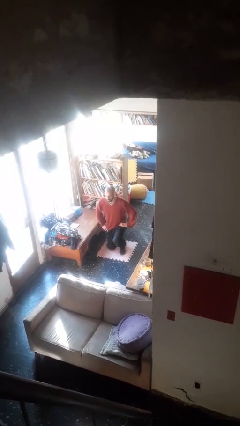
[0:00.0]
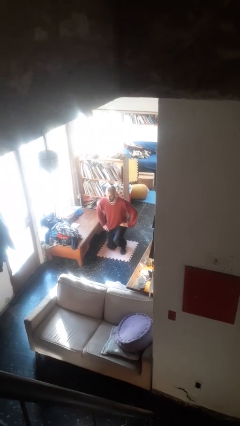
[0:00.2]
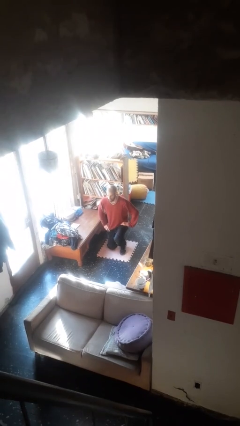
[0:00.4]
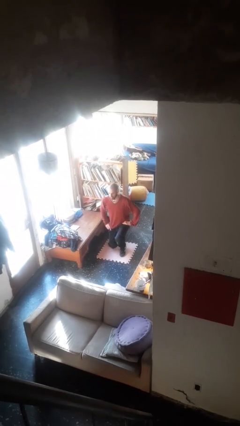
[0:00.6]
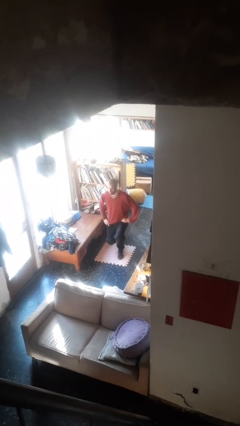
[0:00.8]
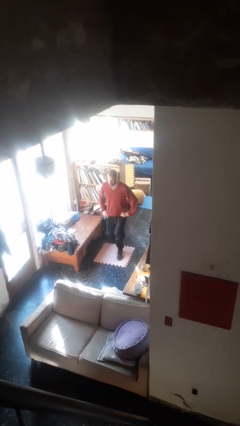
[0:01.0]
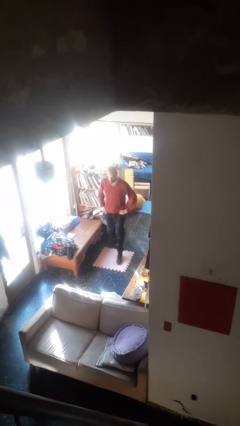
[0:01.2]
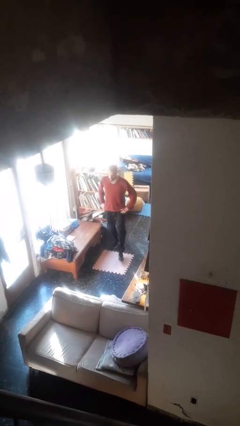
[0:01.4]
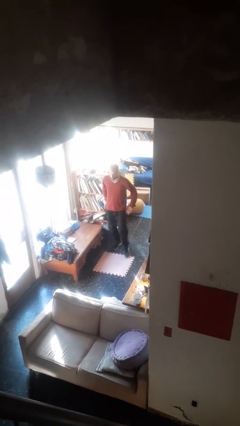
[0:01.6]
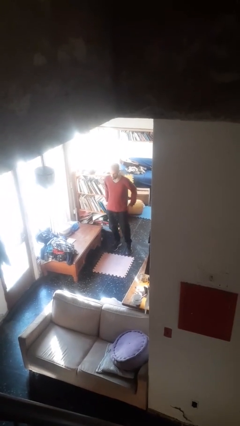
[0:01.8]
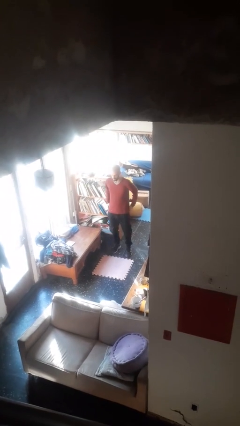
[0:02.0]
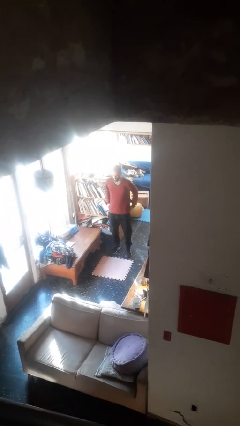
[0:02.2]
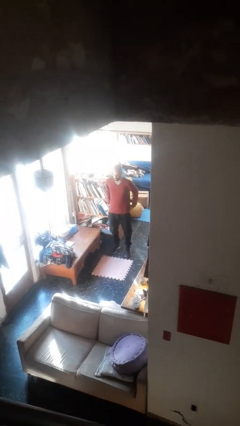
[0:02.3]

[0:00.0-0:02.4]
person stands up from floor

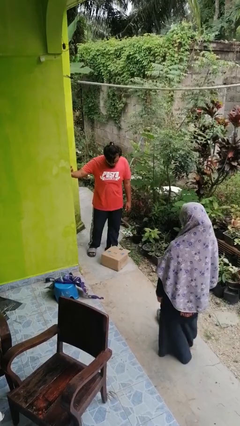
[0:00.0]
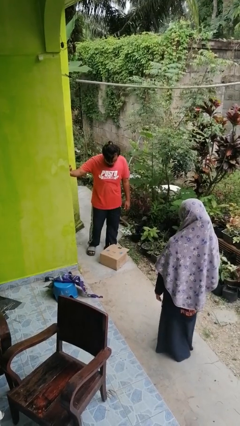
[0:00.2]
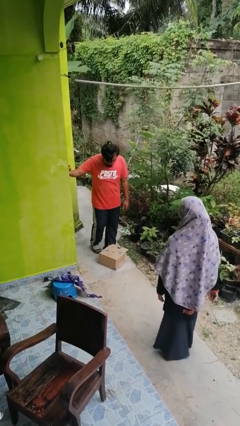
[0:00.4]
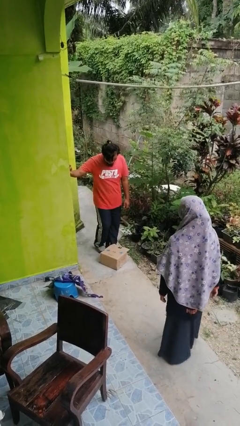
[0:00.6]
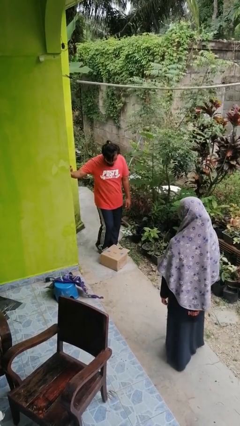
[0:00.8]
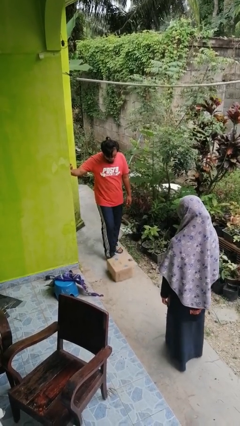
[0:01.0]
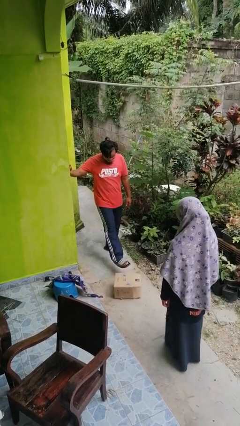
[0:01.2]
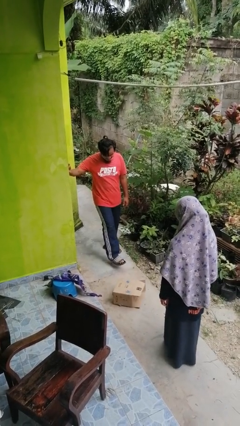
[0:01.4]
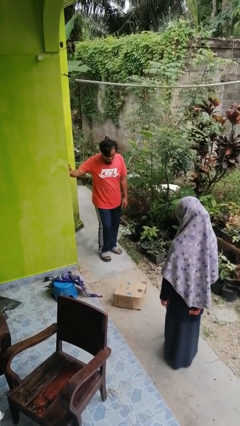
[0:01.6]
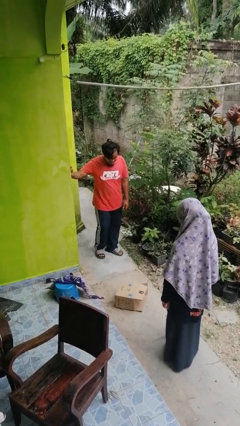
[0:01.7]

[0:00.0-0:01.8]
person kicks object to person

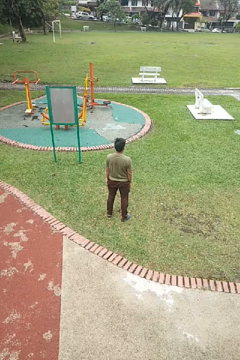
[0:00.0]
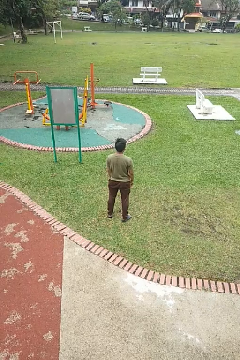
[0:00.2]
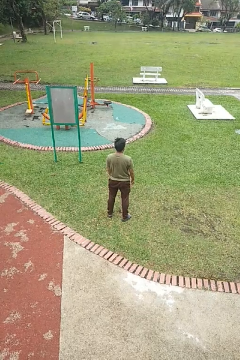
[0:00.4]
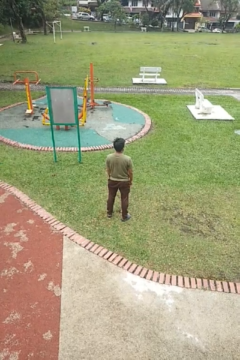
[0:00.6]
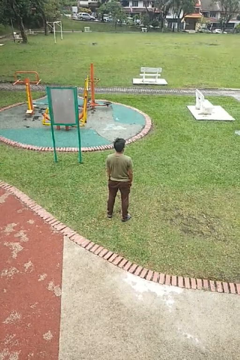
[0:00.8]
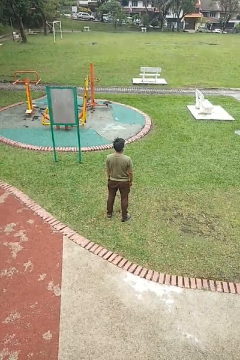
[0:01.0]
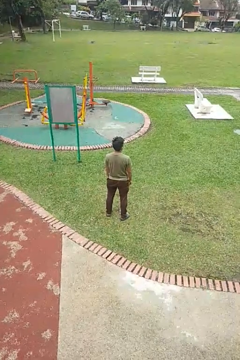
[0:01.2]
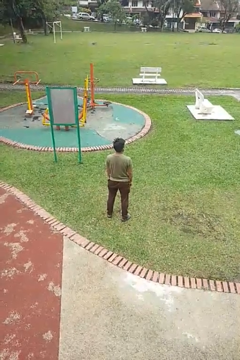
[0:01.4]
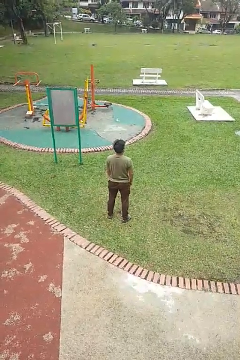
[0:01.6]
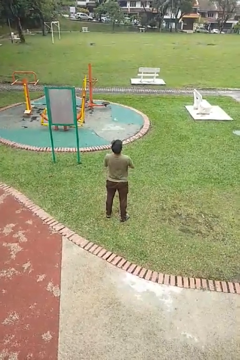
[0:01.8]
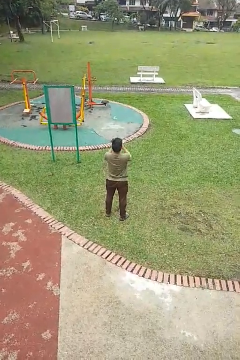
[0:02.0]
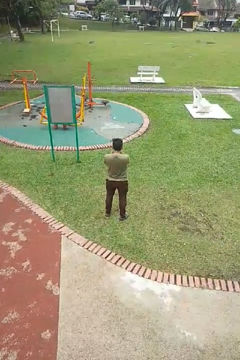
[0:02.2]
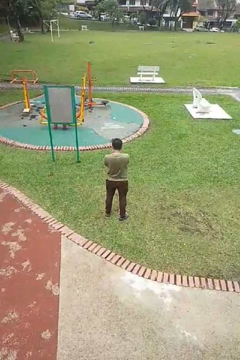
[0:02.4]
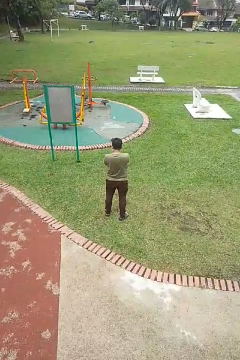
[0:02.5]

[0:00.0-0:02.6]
person sneezes into hand

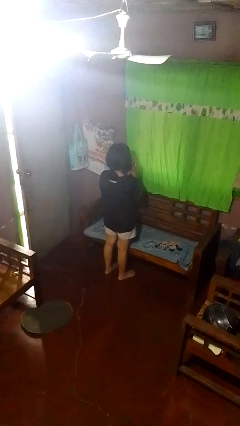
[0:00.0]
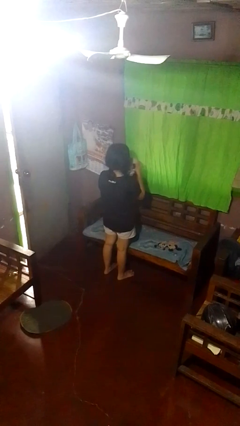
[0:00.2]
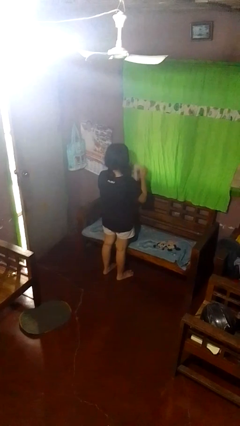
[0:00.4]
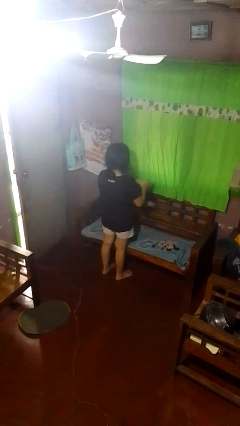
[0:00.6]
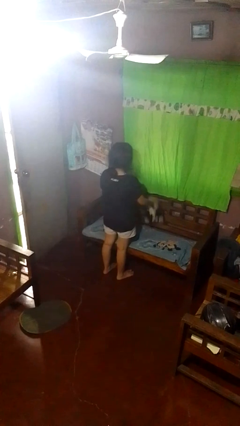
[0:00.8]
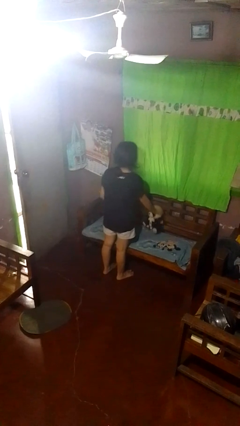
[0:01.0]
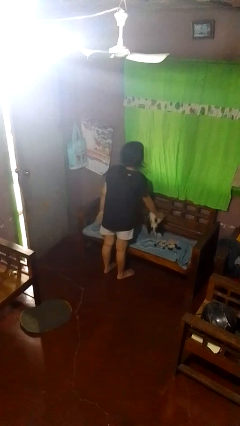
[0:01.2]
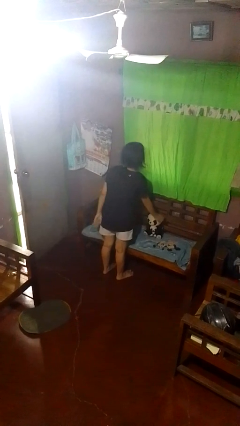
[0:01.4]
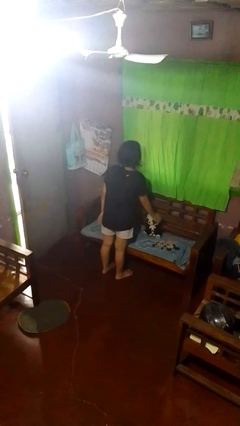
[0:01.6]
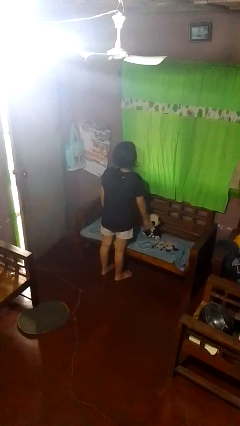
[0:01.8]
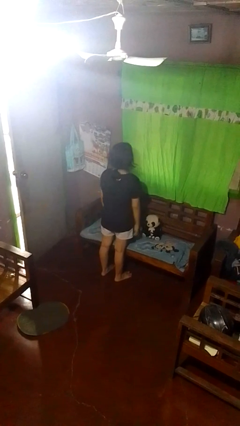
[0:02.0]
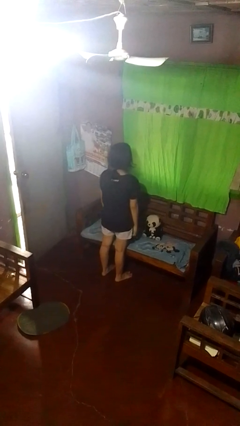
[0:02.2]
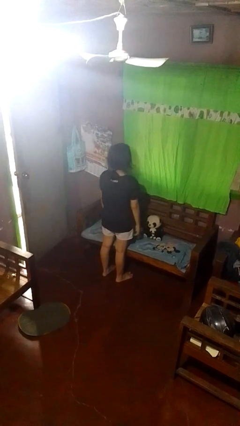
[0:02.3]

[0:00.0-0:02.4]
person puts down object on couch

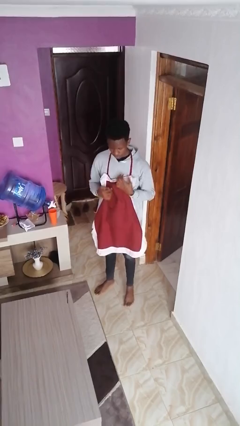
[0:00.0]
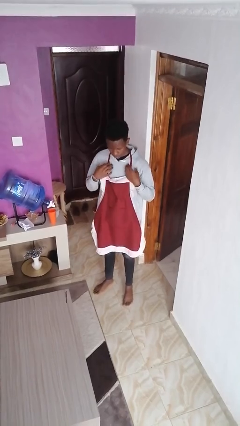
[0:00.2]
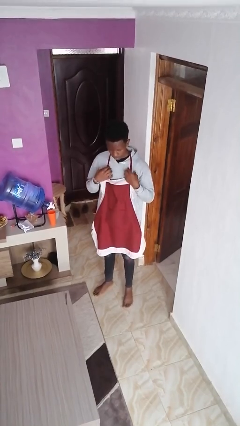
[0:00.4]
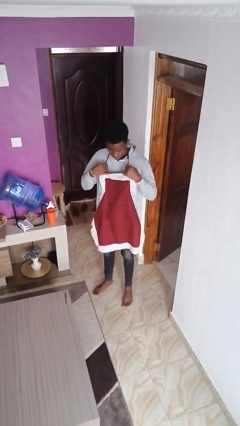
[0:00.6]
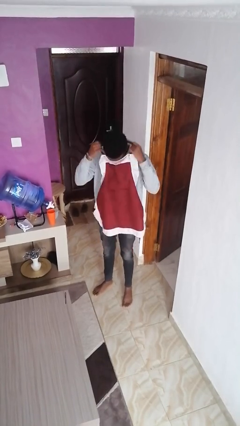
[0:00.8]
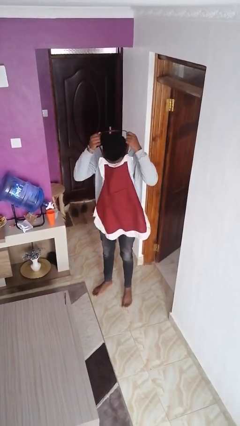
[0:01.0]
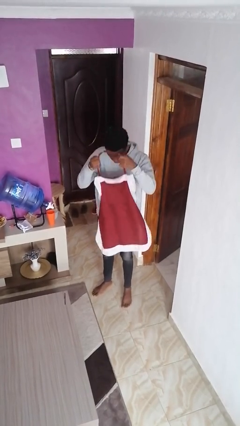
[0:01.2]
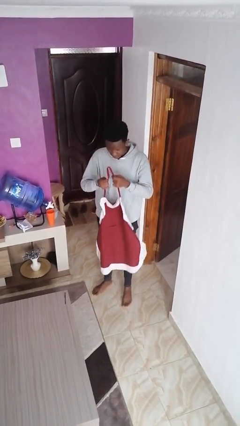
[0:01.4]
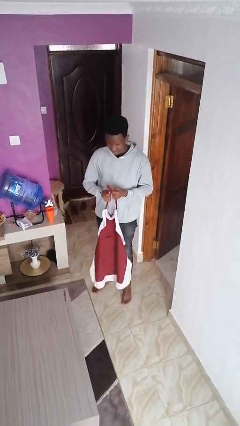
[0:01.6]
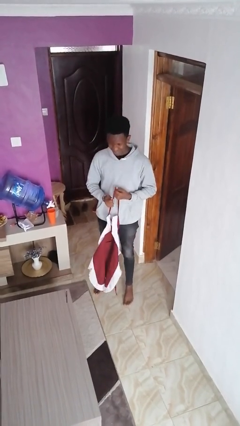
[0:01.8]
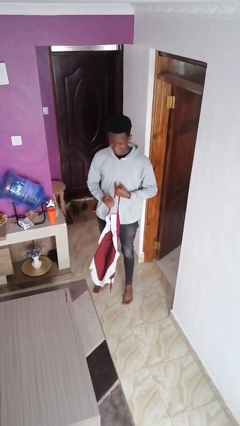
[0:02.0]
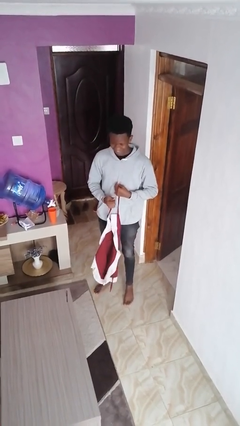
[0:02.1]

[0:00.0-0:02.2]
person takes off apron

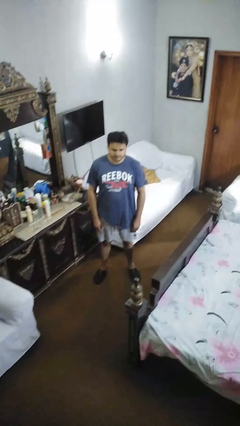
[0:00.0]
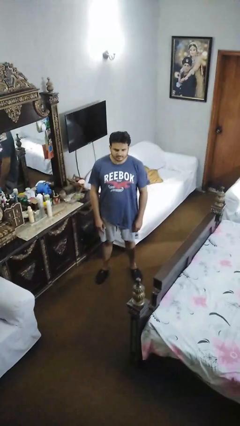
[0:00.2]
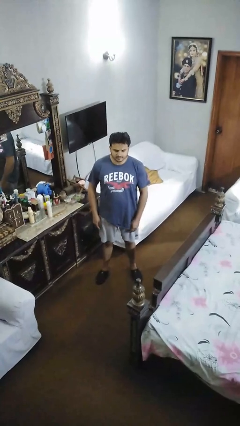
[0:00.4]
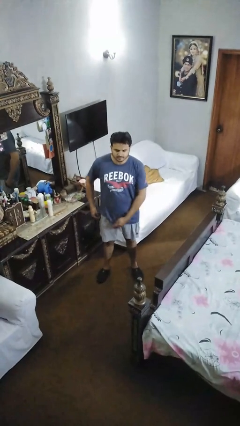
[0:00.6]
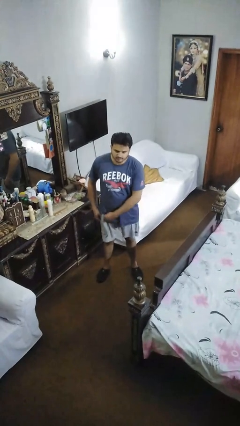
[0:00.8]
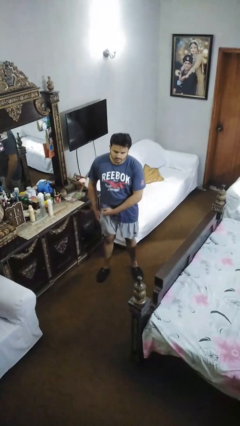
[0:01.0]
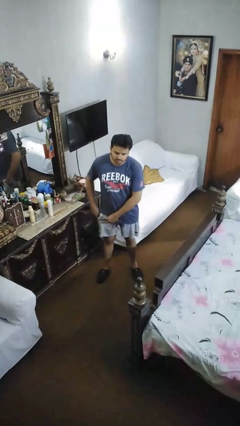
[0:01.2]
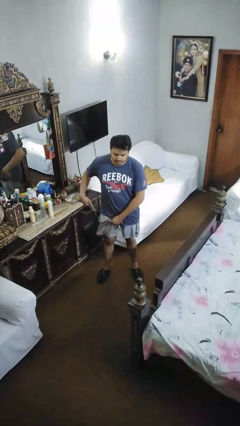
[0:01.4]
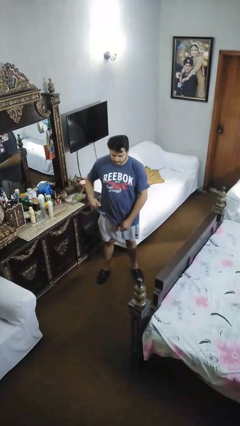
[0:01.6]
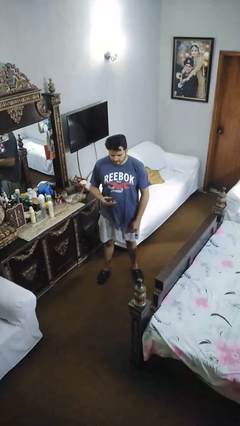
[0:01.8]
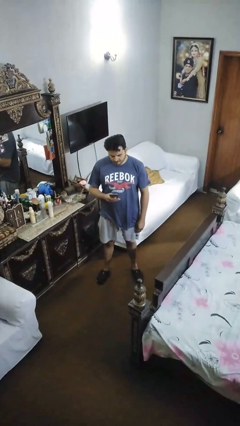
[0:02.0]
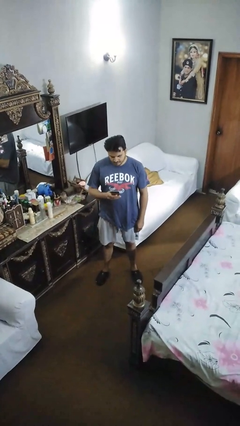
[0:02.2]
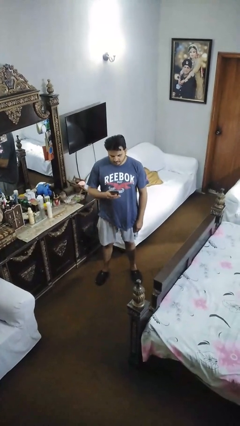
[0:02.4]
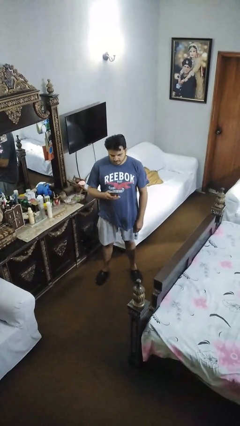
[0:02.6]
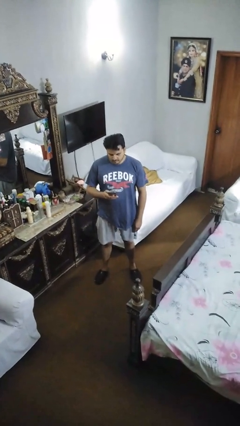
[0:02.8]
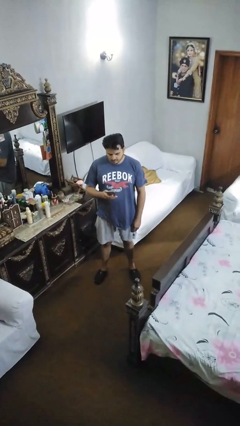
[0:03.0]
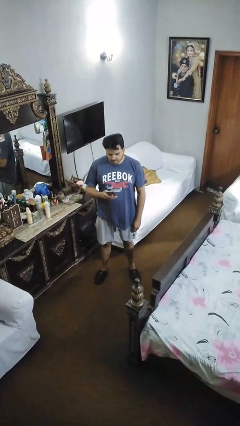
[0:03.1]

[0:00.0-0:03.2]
person takes phone from pocket

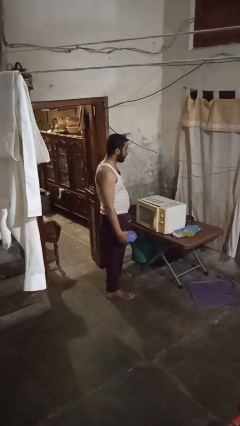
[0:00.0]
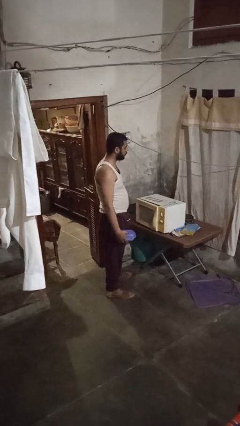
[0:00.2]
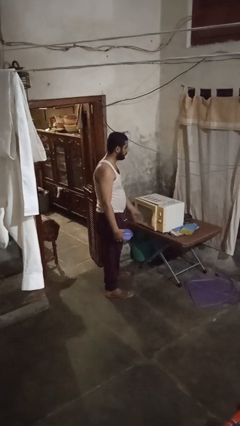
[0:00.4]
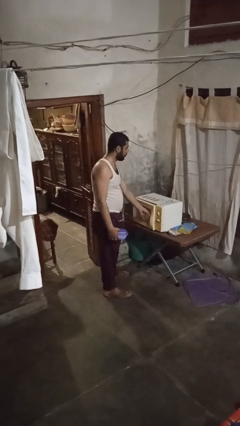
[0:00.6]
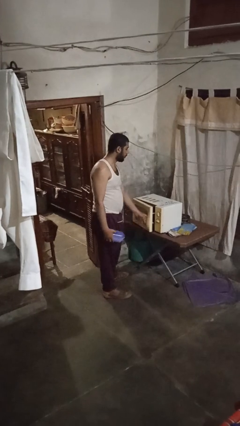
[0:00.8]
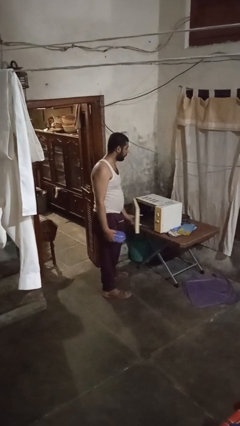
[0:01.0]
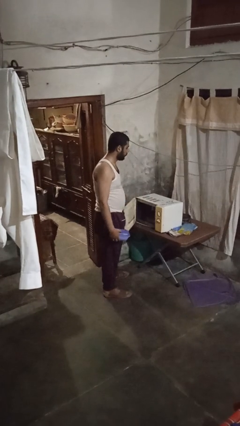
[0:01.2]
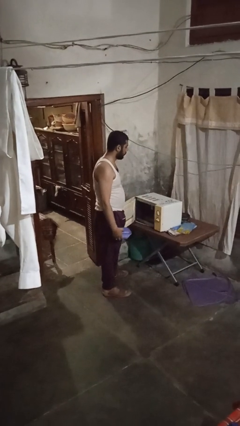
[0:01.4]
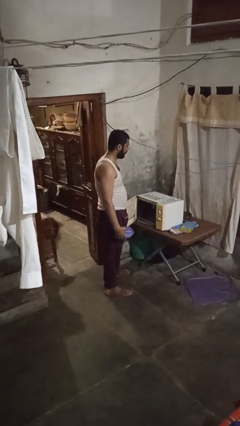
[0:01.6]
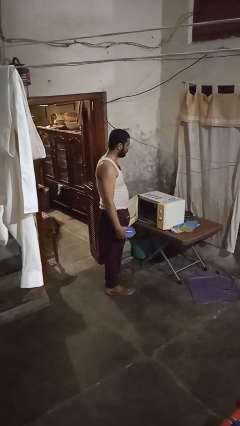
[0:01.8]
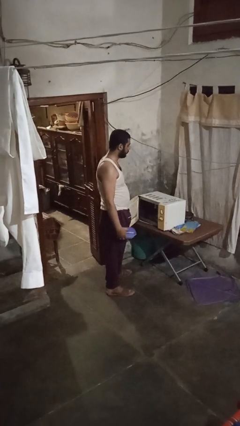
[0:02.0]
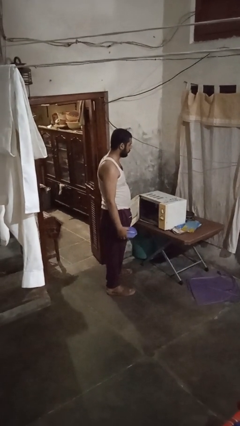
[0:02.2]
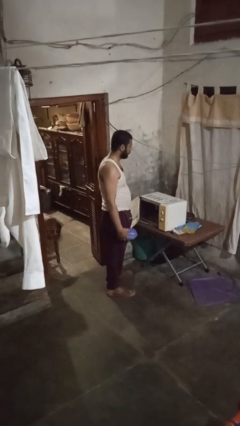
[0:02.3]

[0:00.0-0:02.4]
person opens microwave

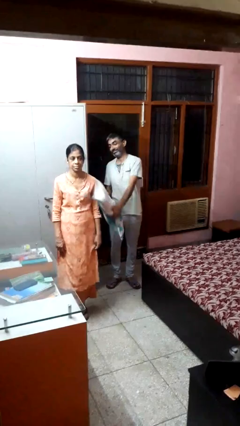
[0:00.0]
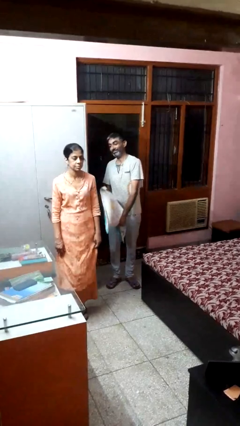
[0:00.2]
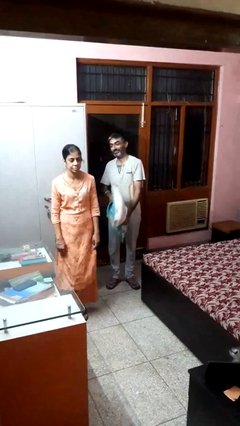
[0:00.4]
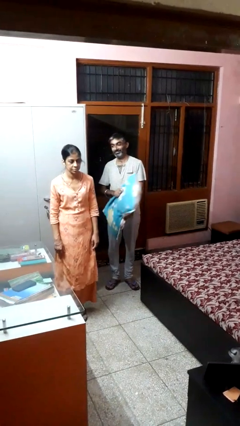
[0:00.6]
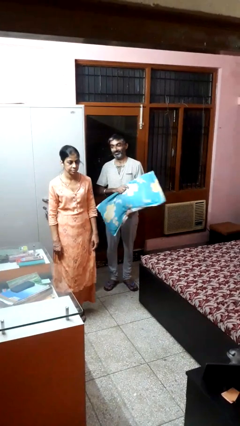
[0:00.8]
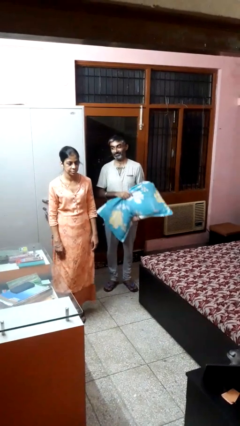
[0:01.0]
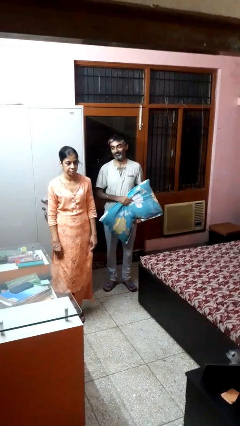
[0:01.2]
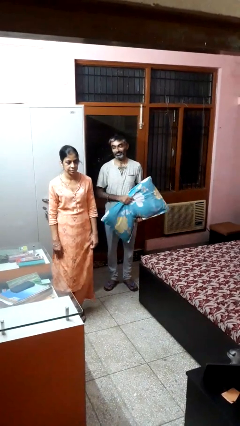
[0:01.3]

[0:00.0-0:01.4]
person hits person with pillow
